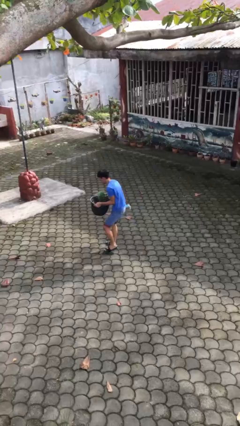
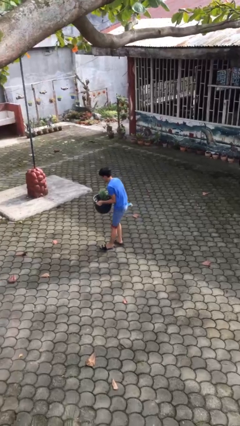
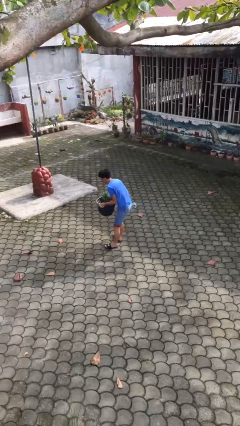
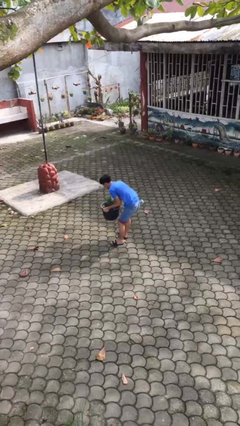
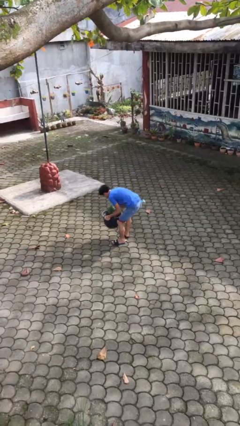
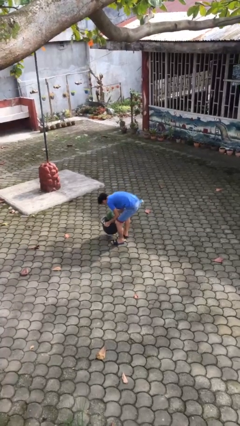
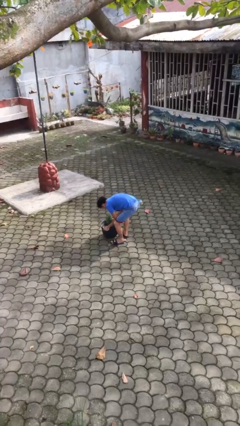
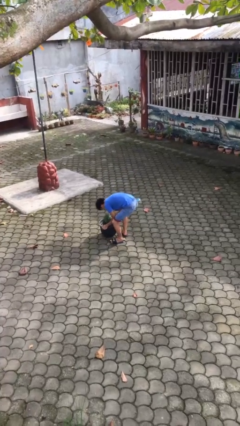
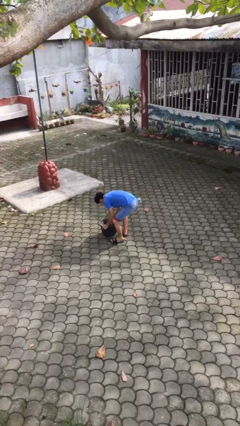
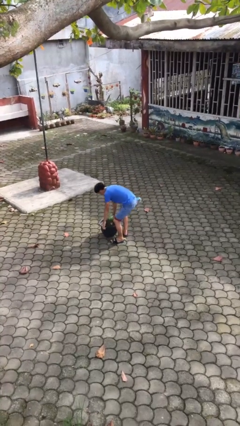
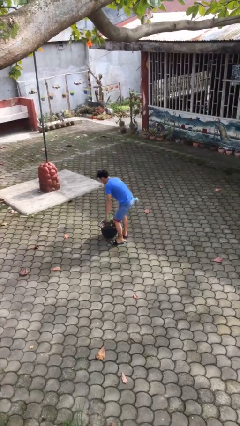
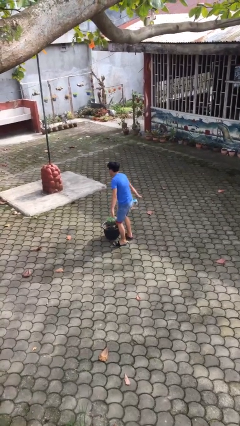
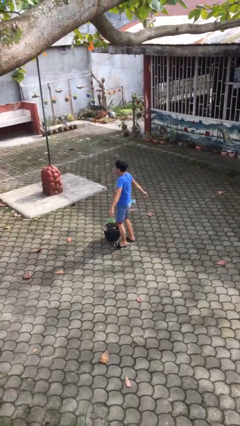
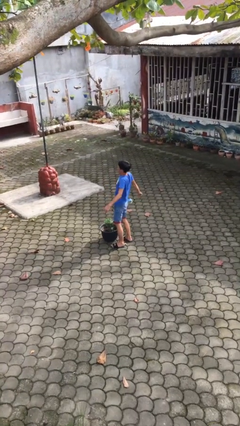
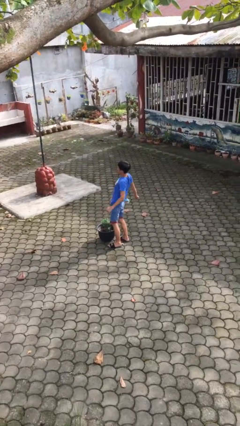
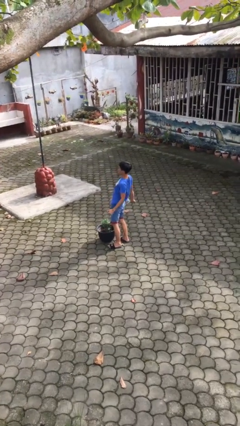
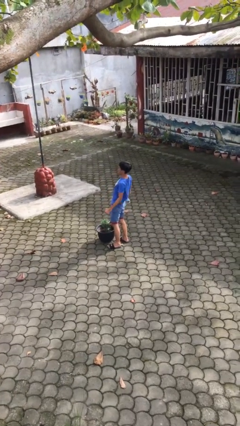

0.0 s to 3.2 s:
person puts down object on floor

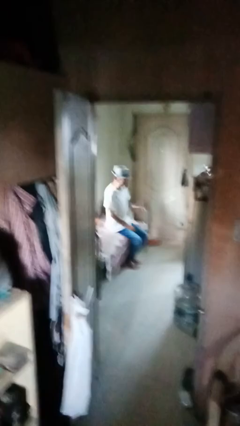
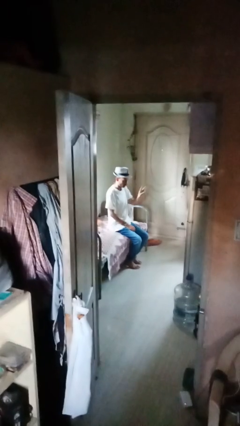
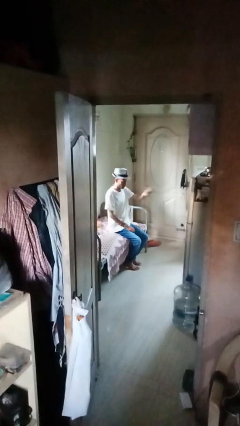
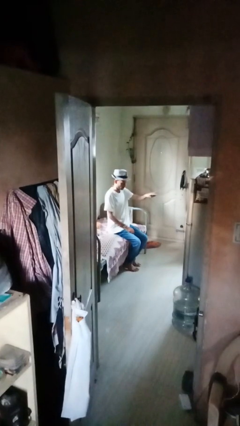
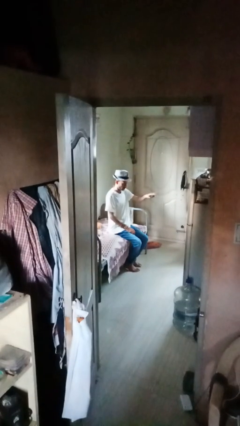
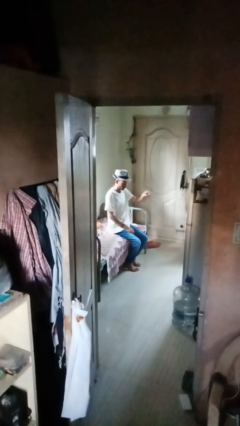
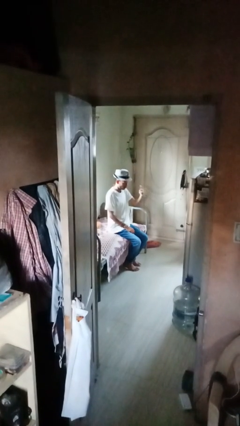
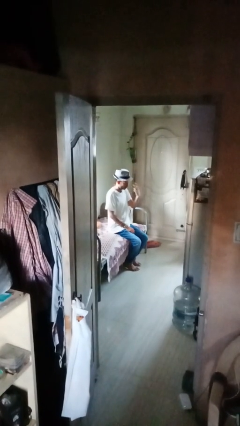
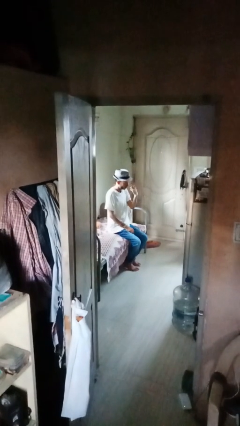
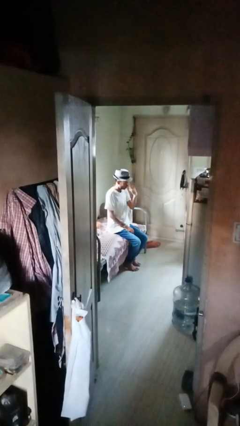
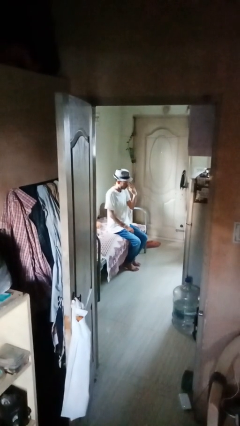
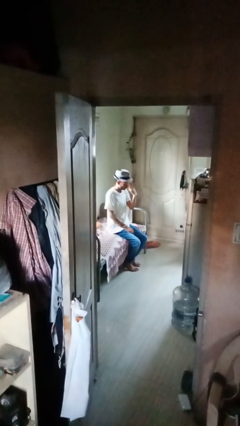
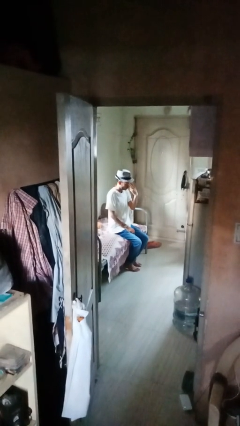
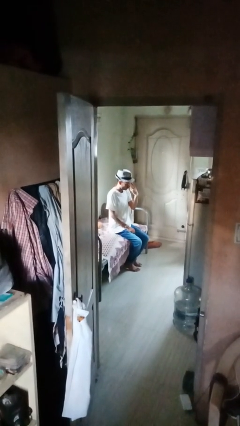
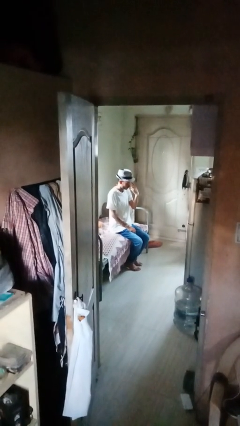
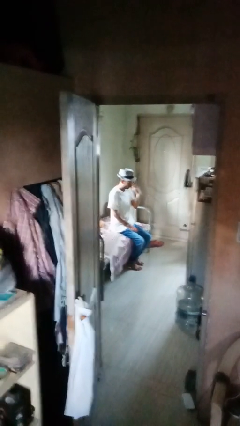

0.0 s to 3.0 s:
person gestures watch closely

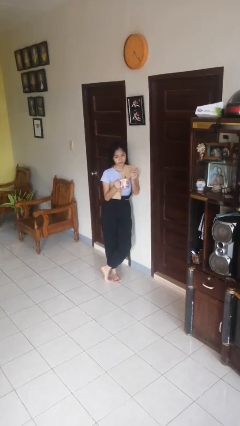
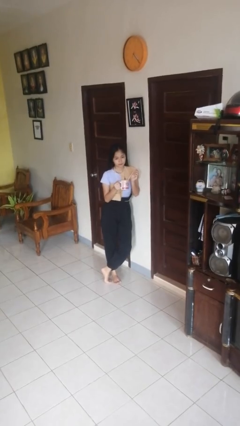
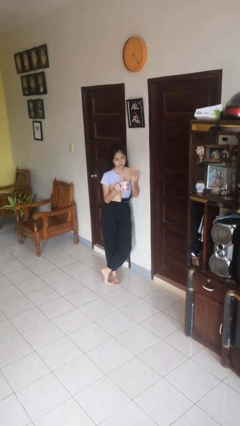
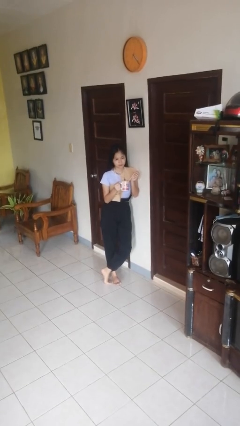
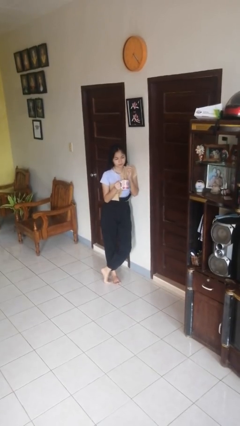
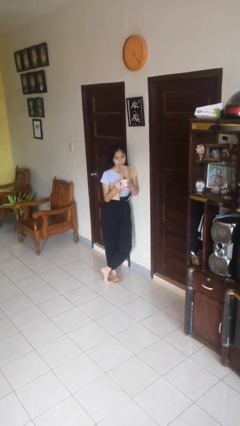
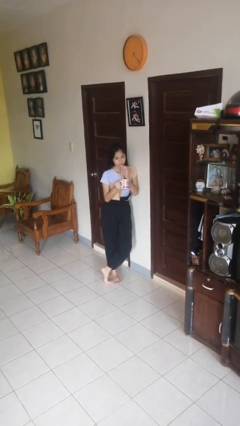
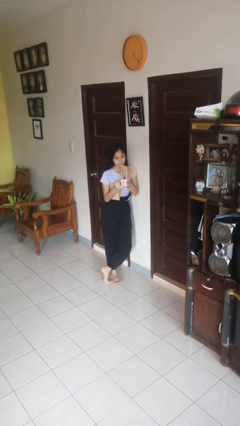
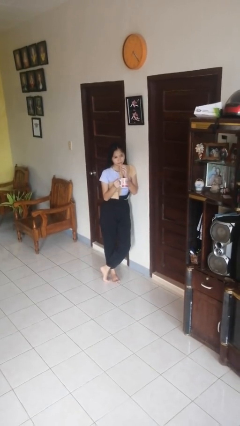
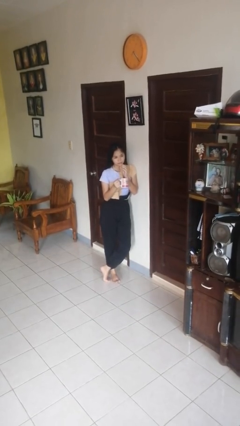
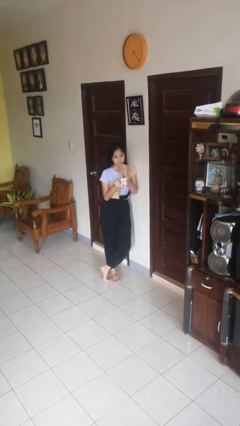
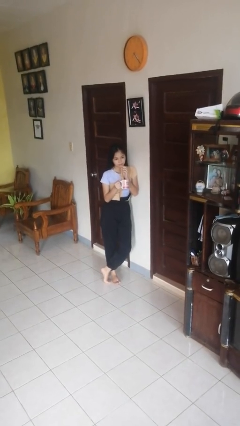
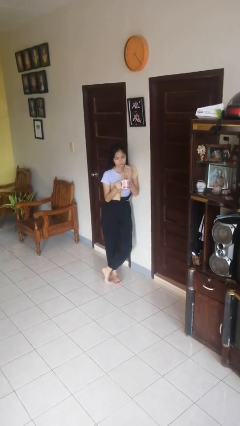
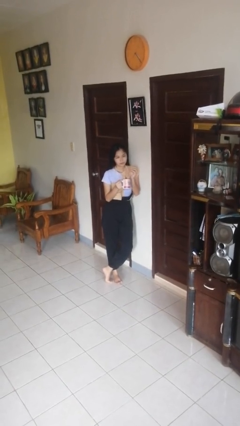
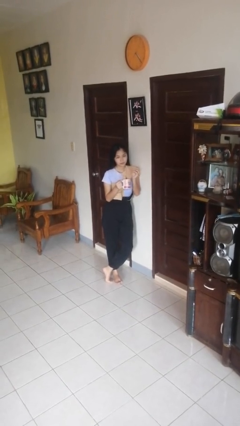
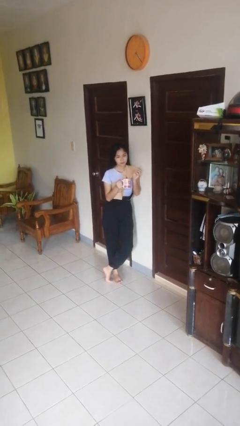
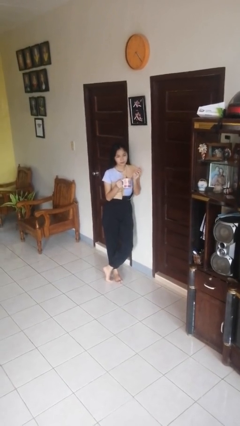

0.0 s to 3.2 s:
person drinks from straw

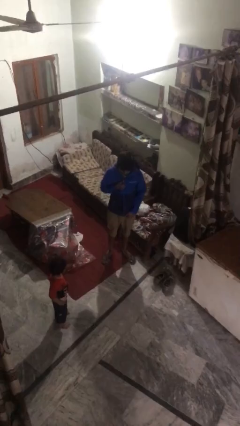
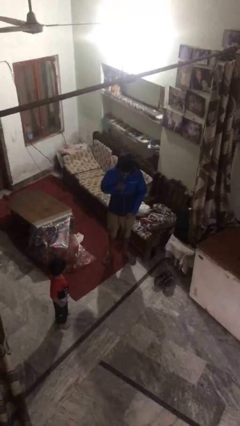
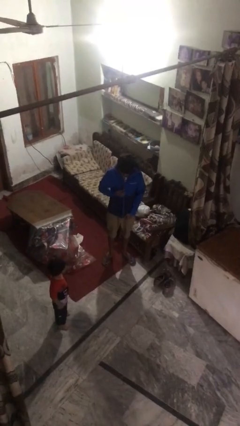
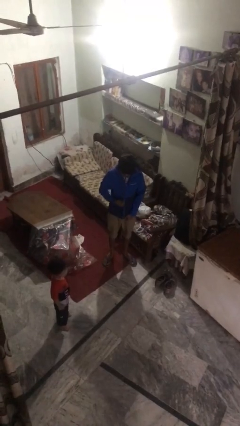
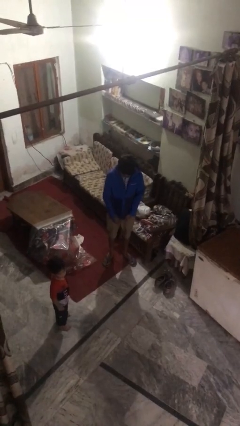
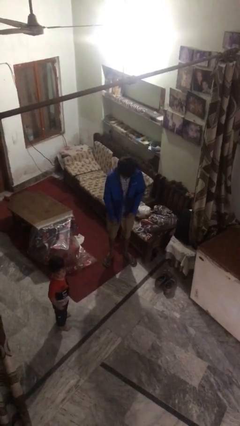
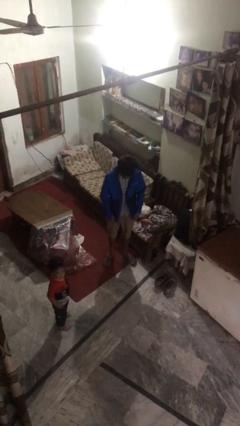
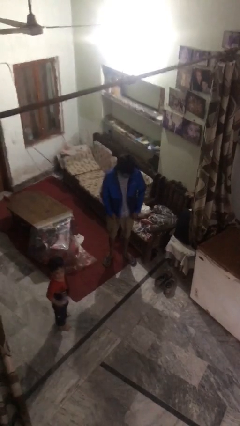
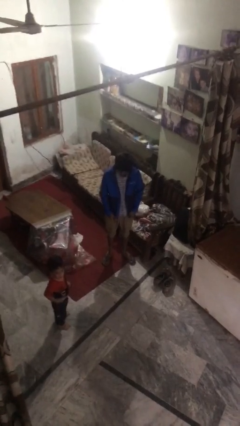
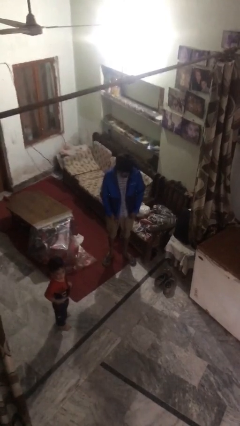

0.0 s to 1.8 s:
person unzips jacket

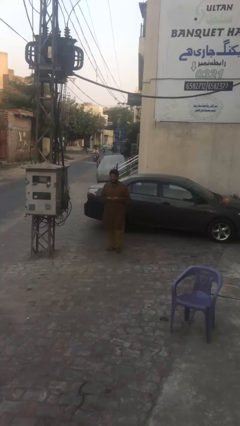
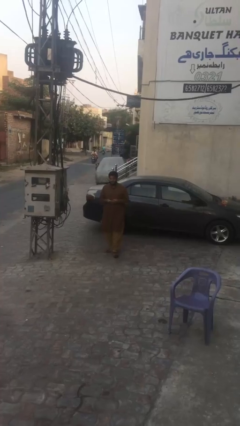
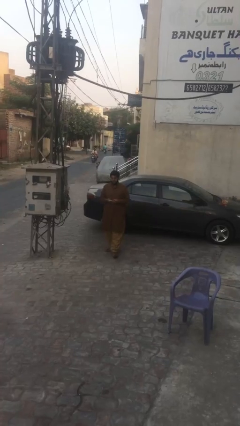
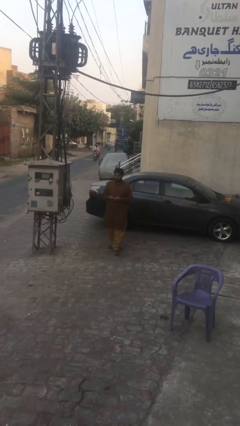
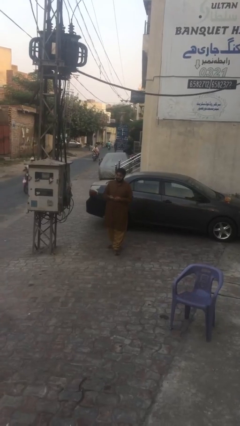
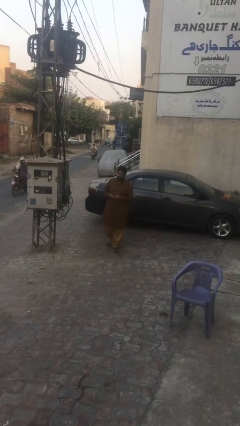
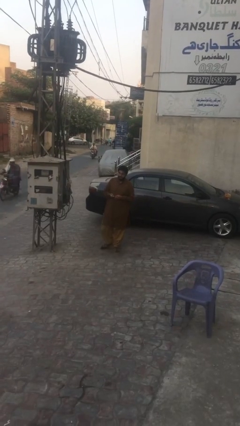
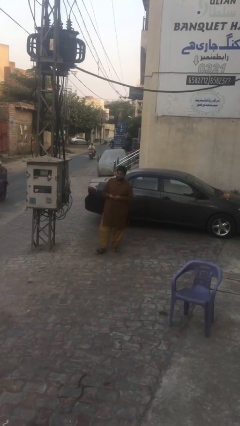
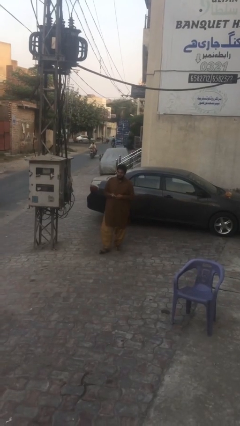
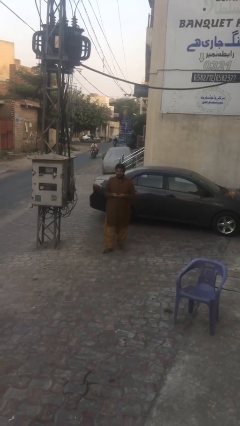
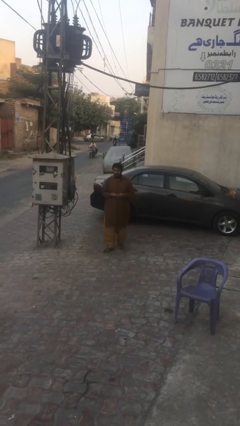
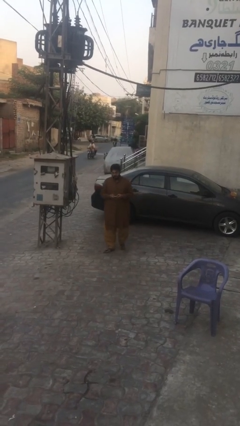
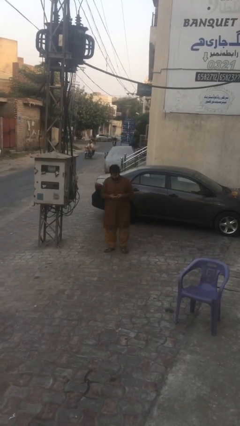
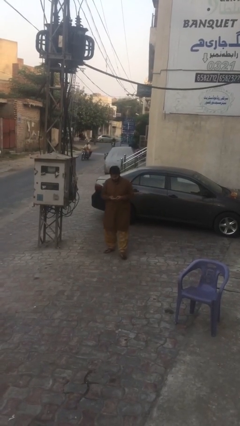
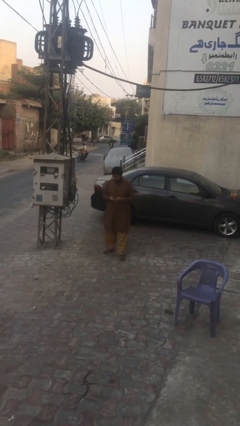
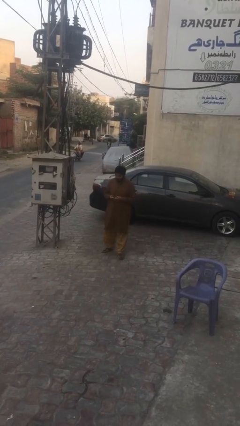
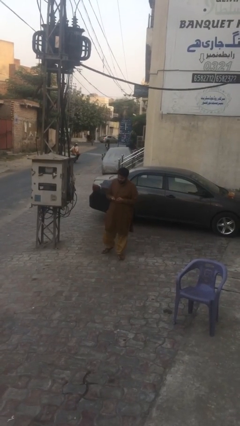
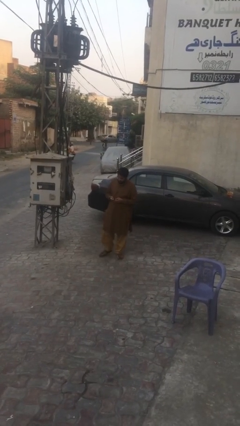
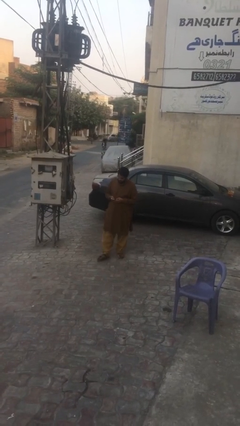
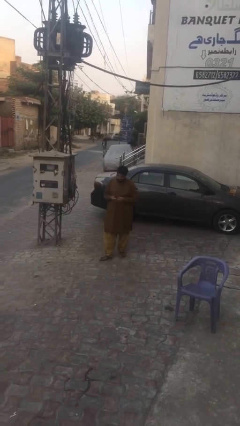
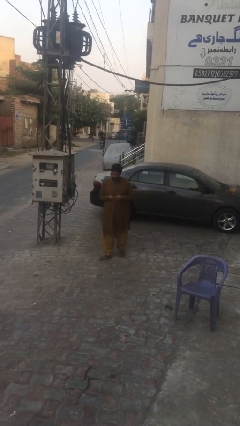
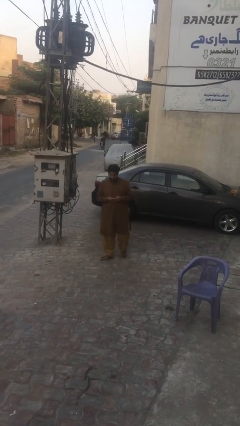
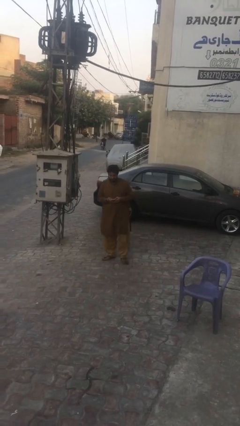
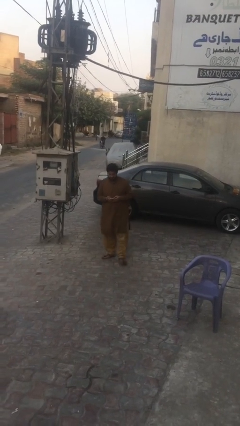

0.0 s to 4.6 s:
person texts on phone

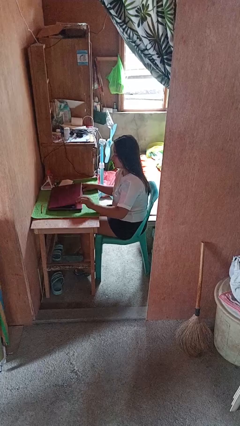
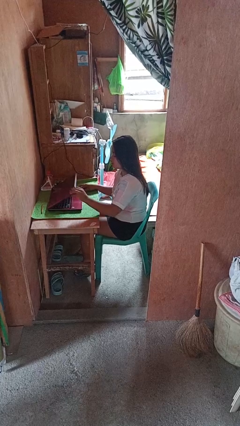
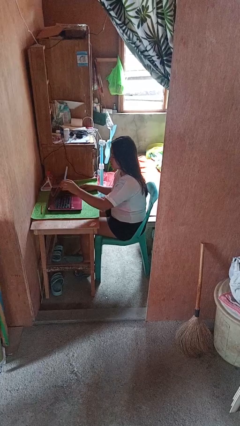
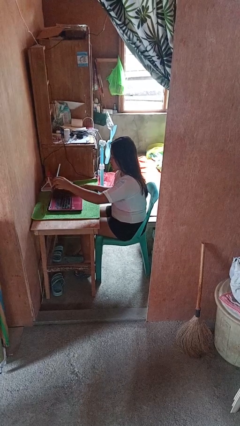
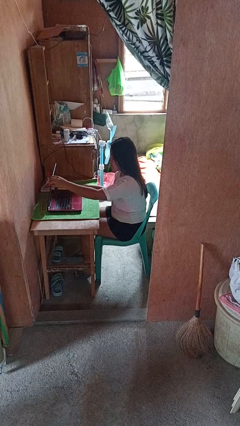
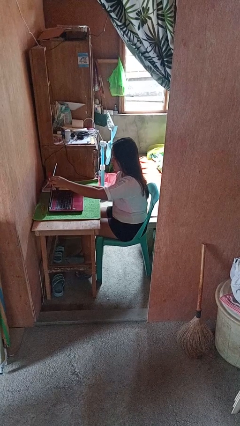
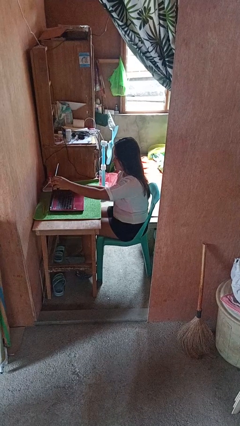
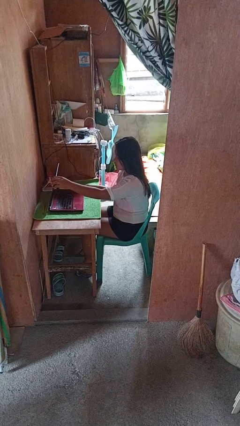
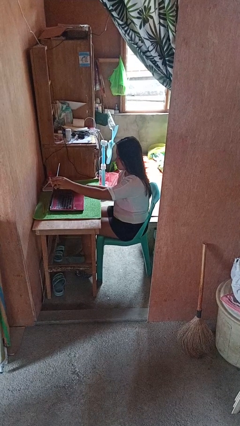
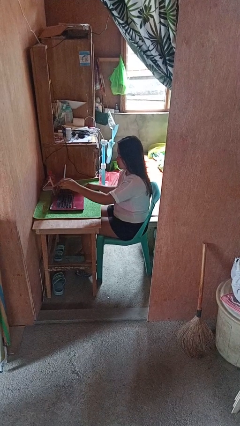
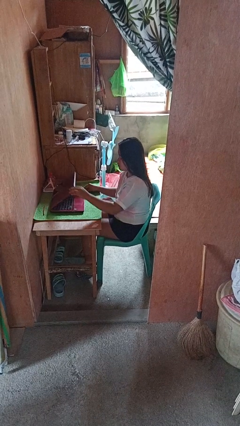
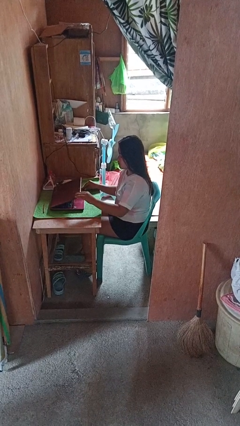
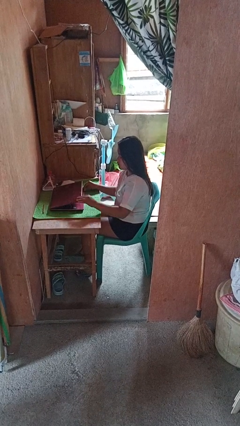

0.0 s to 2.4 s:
person opens laptop
